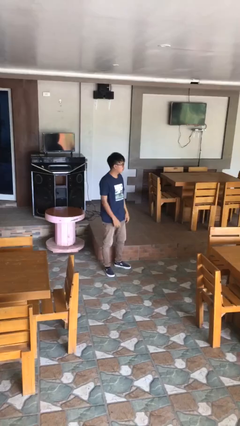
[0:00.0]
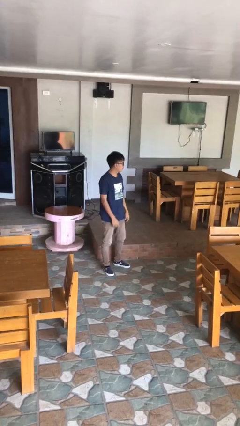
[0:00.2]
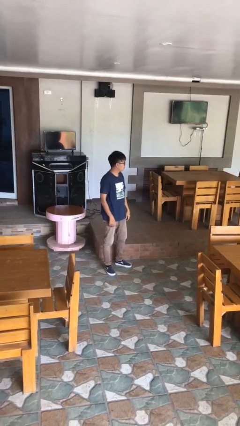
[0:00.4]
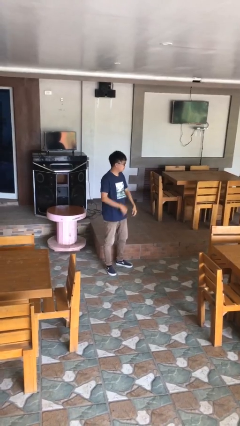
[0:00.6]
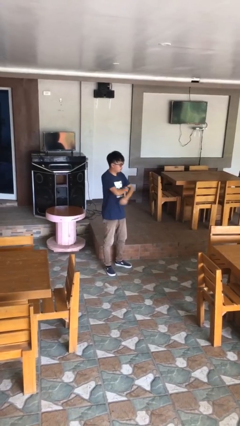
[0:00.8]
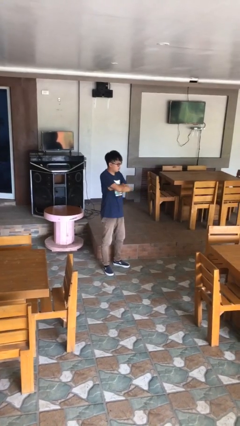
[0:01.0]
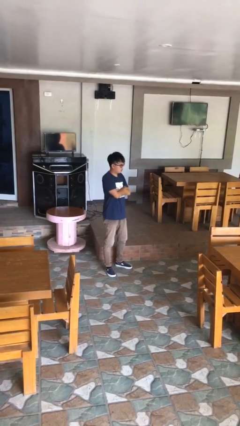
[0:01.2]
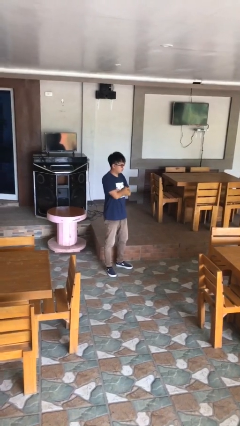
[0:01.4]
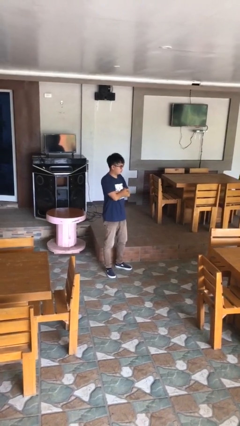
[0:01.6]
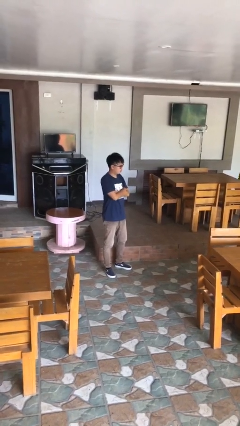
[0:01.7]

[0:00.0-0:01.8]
person crosses arms

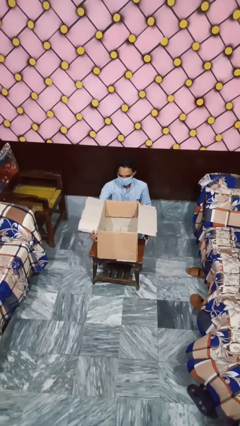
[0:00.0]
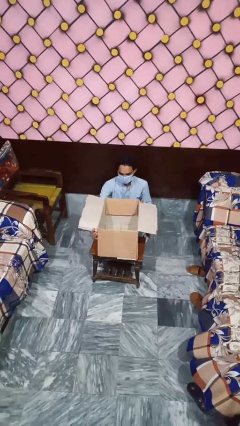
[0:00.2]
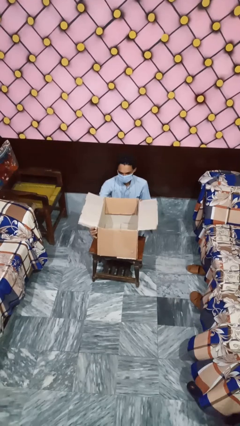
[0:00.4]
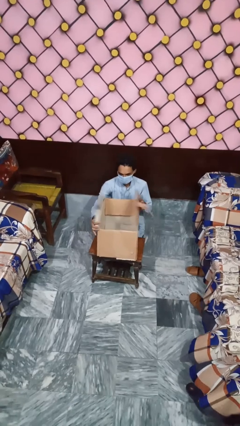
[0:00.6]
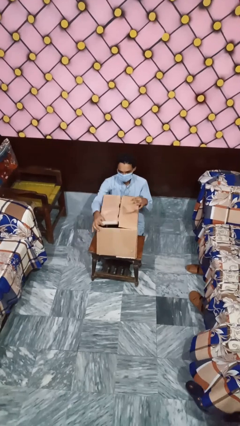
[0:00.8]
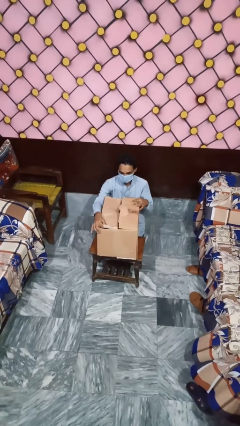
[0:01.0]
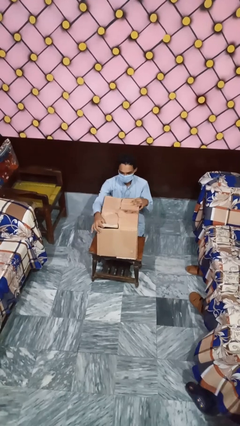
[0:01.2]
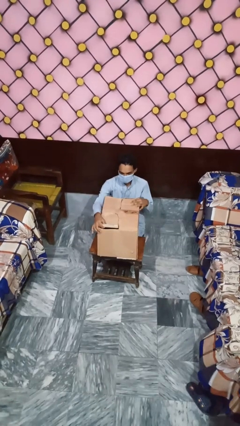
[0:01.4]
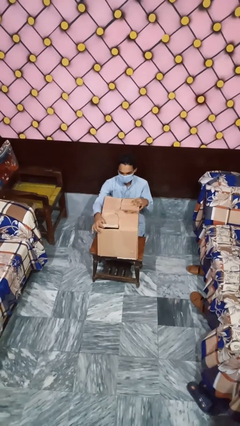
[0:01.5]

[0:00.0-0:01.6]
person closes box

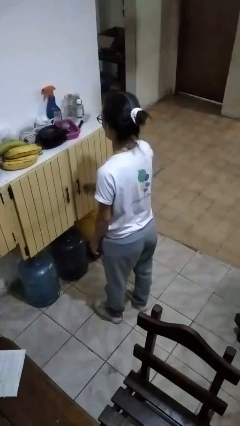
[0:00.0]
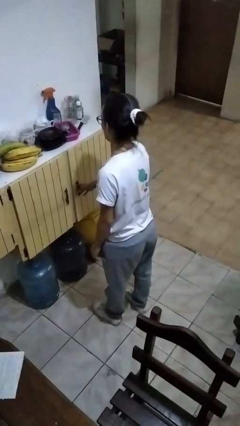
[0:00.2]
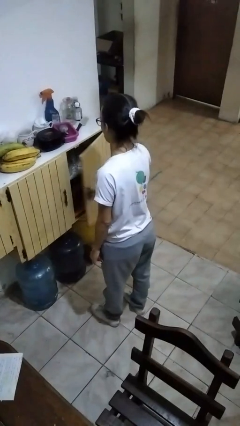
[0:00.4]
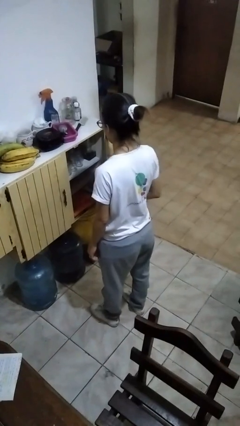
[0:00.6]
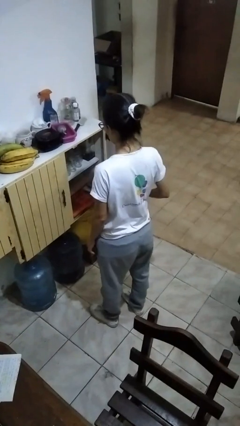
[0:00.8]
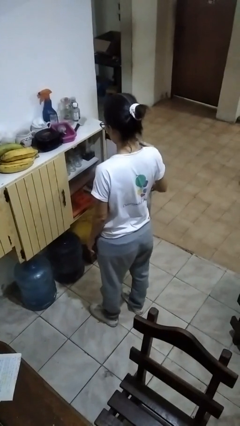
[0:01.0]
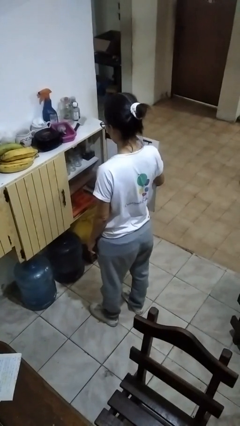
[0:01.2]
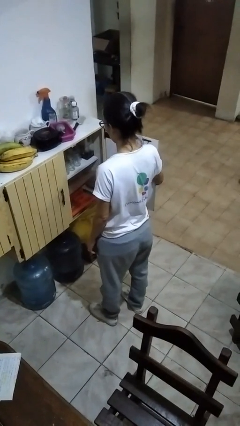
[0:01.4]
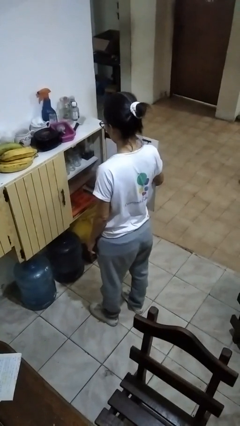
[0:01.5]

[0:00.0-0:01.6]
person opens kitchen drawer

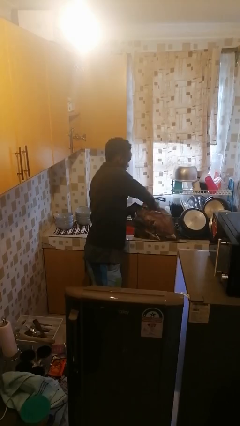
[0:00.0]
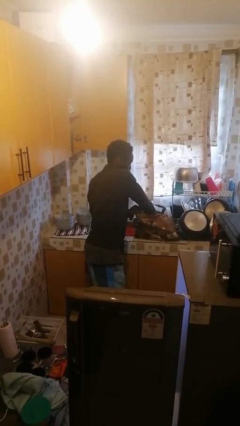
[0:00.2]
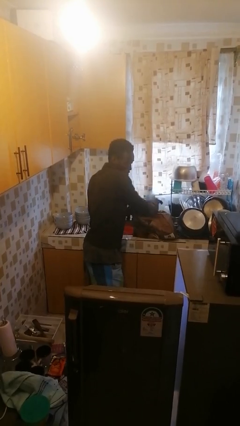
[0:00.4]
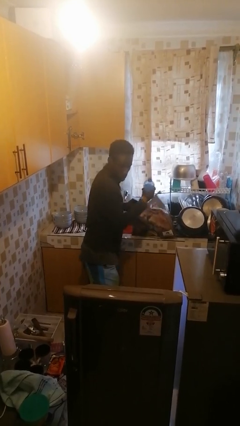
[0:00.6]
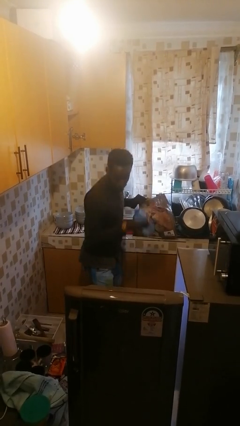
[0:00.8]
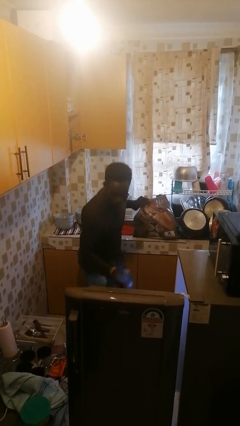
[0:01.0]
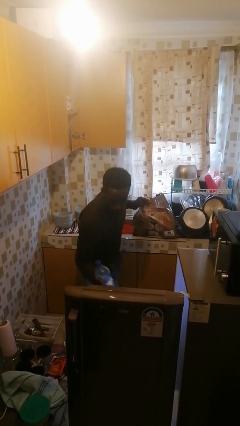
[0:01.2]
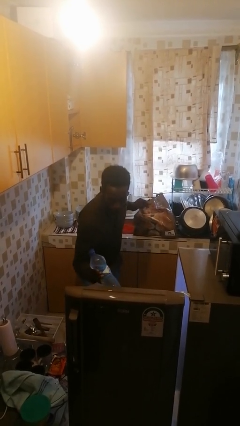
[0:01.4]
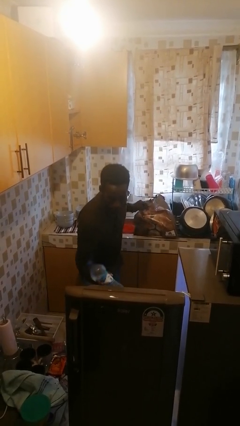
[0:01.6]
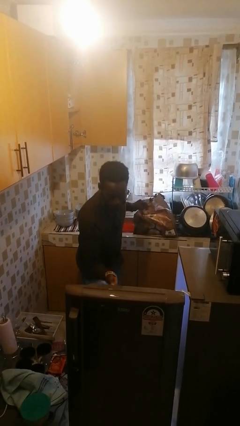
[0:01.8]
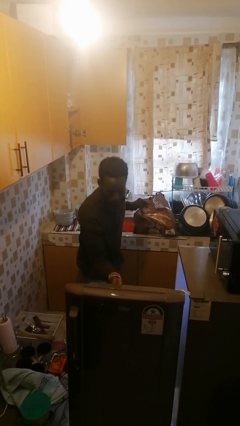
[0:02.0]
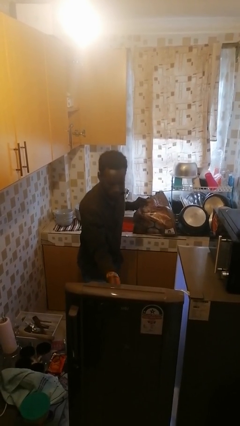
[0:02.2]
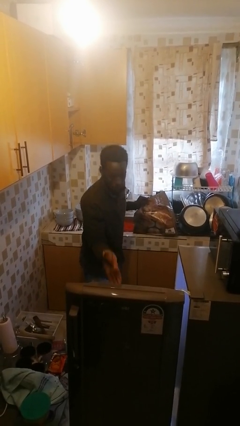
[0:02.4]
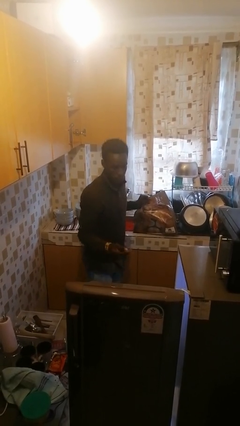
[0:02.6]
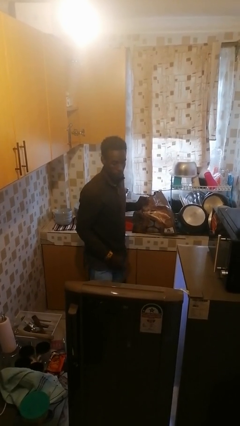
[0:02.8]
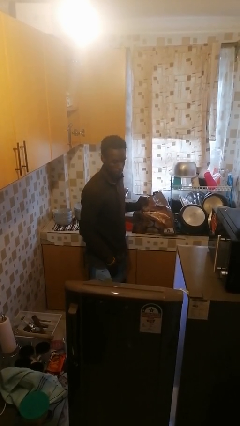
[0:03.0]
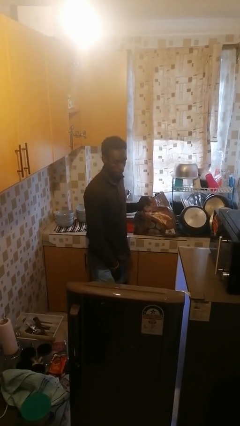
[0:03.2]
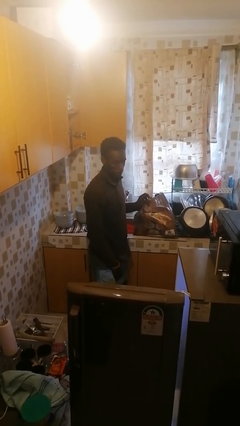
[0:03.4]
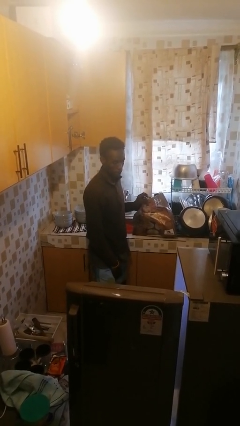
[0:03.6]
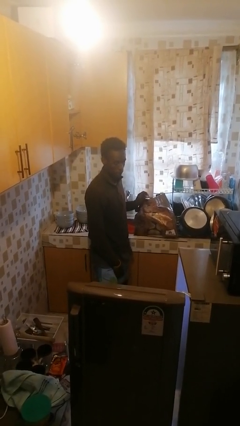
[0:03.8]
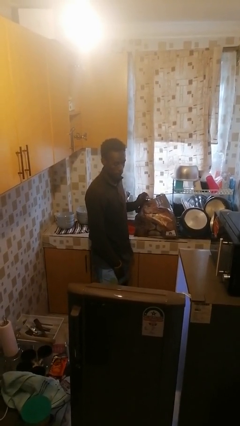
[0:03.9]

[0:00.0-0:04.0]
person loads groceries into refrigerator

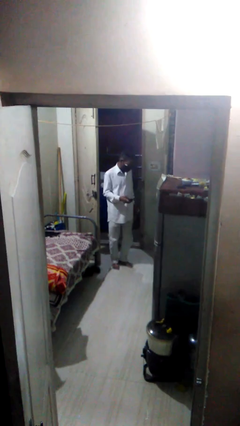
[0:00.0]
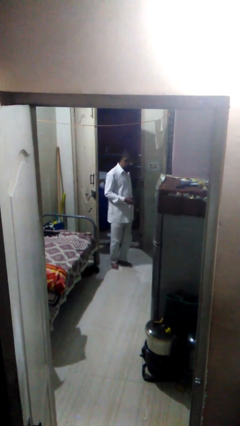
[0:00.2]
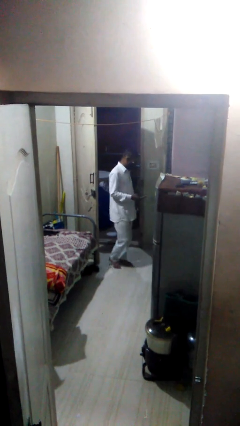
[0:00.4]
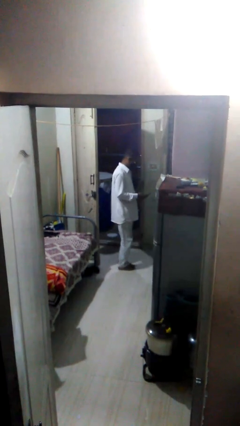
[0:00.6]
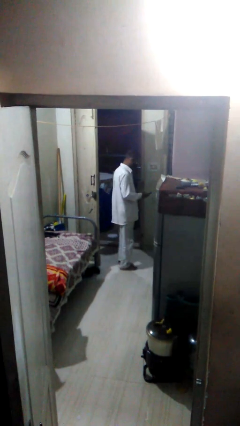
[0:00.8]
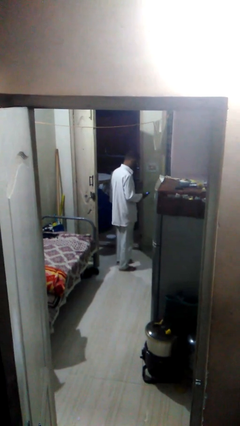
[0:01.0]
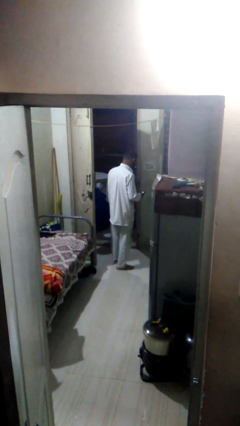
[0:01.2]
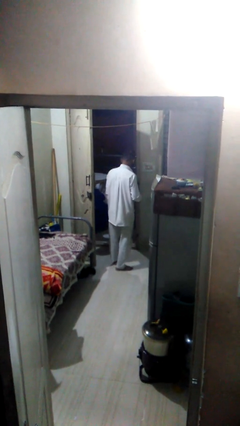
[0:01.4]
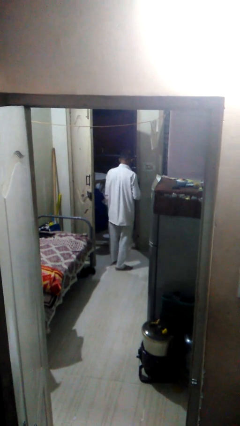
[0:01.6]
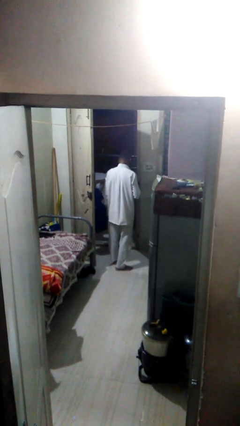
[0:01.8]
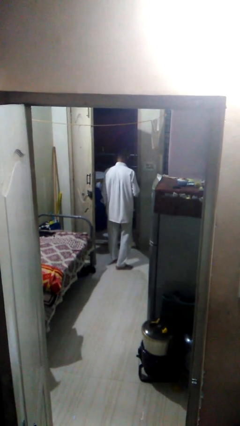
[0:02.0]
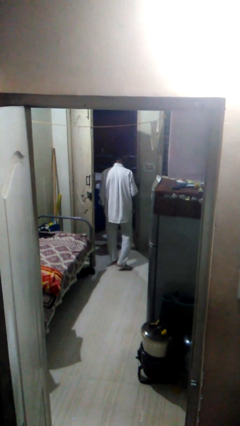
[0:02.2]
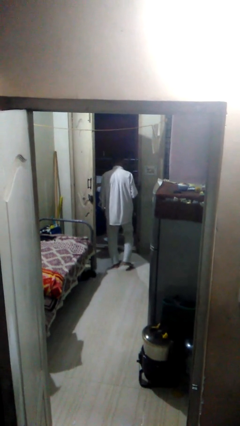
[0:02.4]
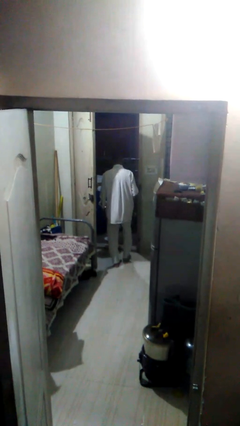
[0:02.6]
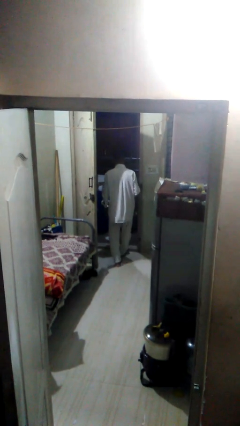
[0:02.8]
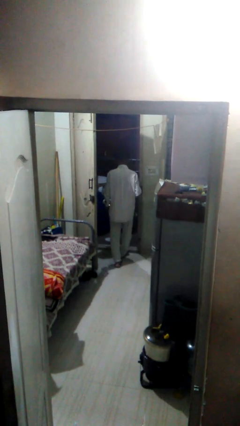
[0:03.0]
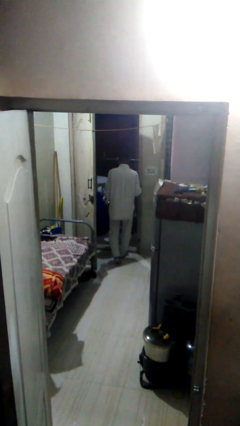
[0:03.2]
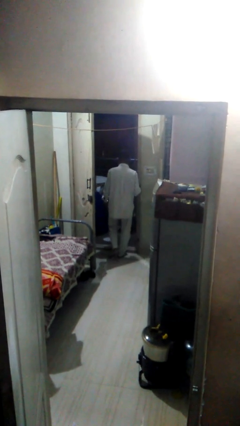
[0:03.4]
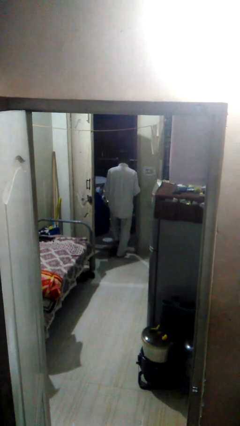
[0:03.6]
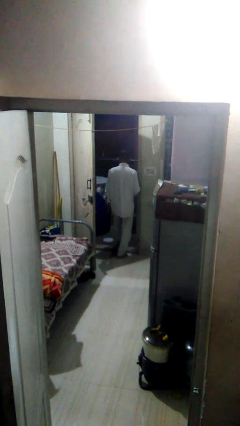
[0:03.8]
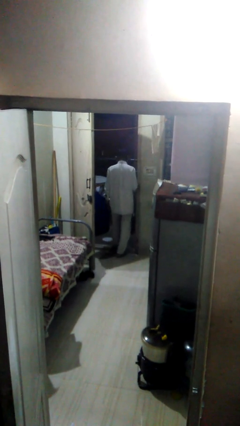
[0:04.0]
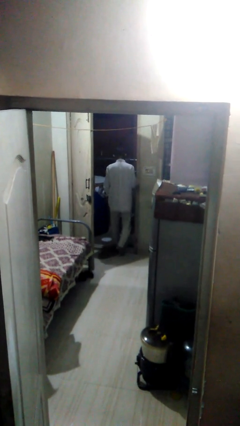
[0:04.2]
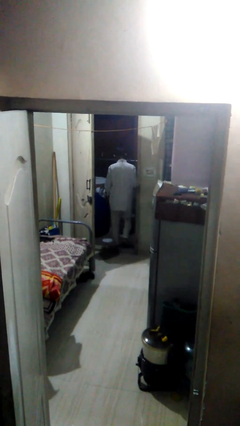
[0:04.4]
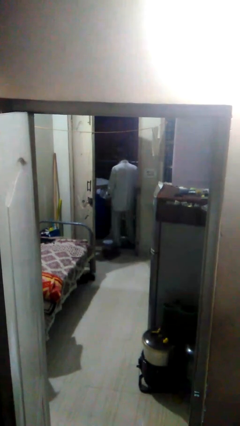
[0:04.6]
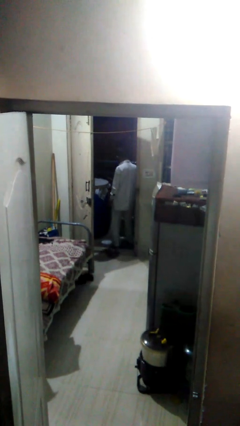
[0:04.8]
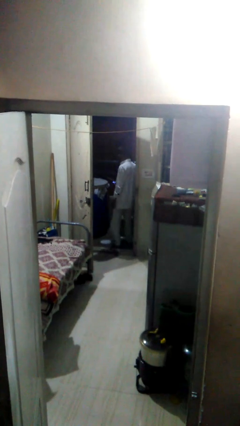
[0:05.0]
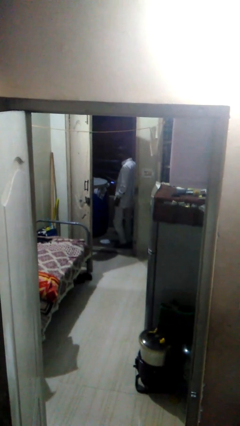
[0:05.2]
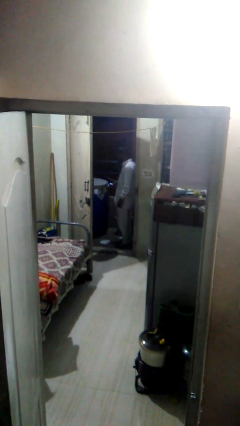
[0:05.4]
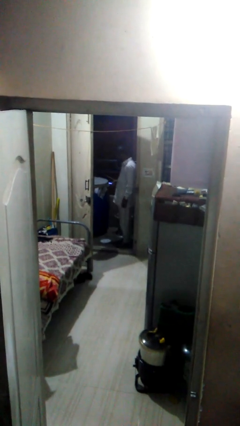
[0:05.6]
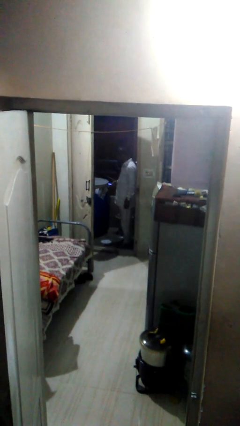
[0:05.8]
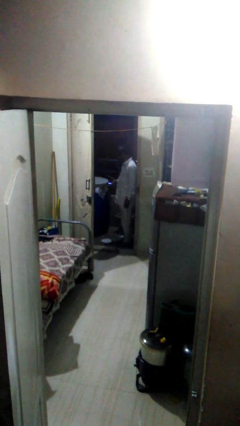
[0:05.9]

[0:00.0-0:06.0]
person exits scene through structure

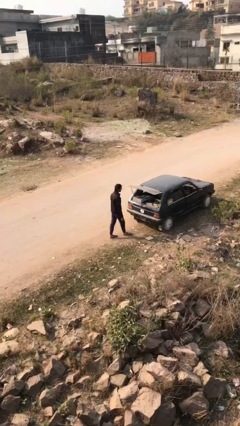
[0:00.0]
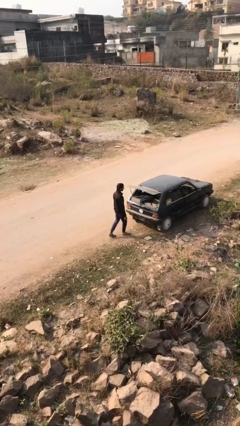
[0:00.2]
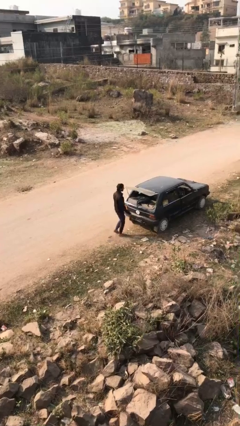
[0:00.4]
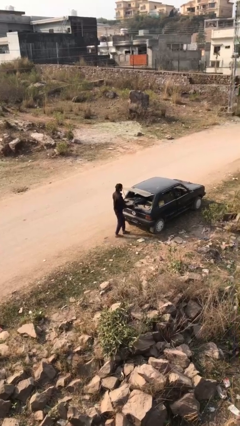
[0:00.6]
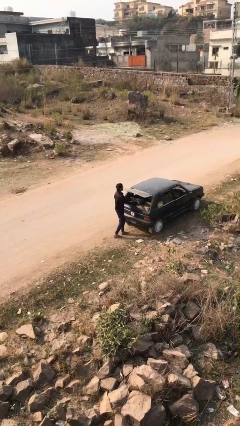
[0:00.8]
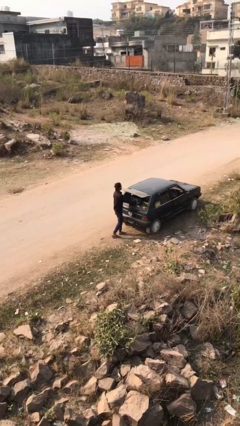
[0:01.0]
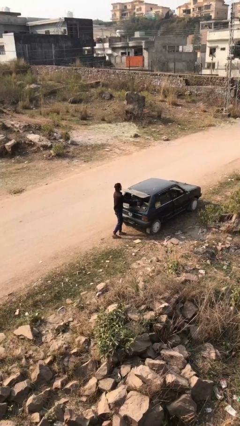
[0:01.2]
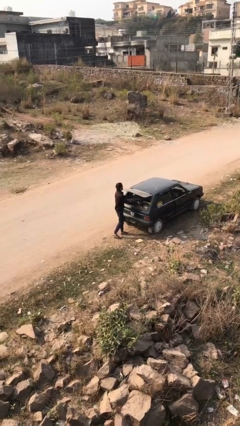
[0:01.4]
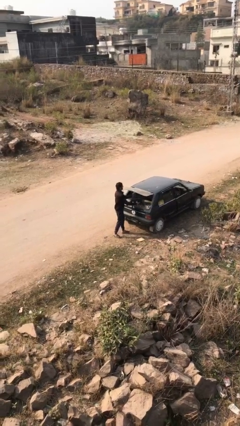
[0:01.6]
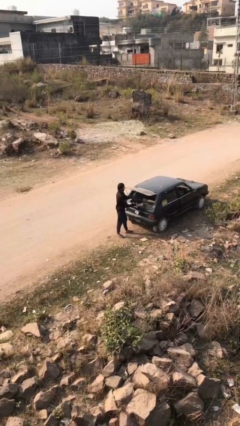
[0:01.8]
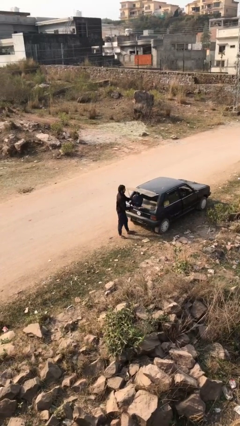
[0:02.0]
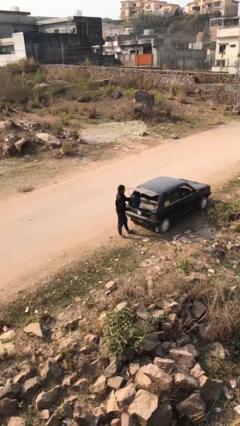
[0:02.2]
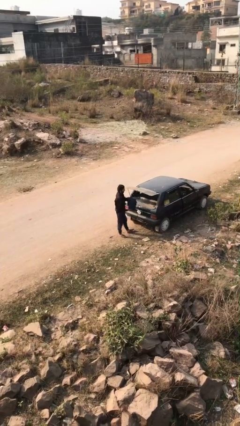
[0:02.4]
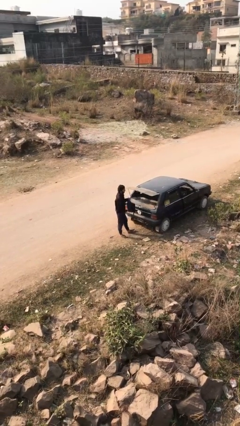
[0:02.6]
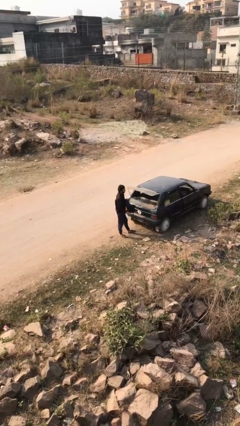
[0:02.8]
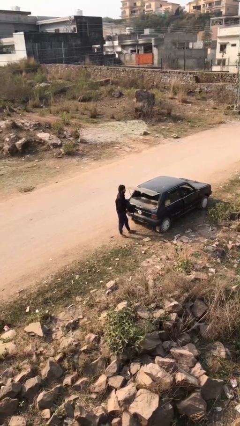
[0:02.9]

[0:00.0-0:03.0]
person unloads car
